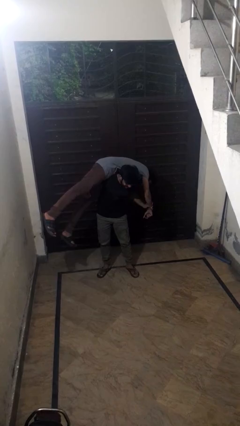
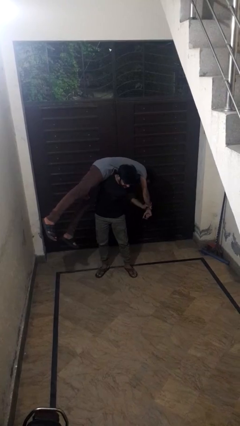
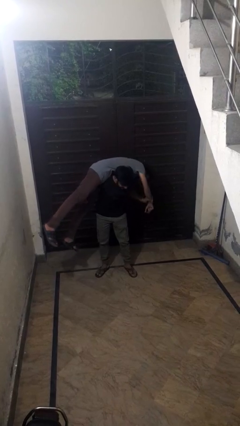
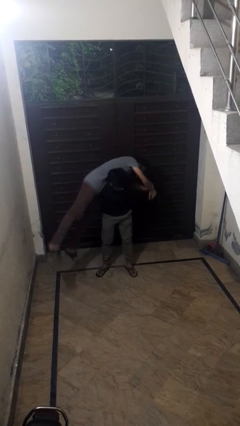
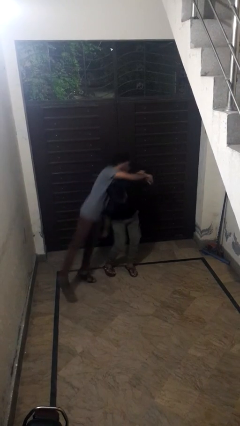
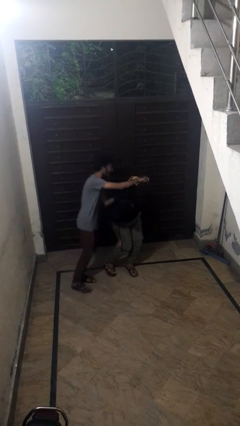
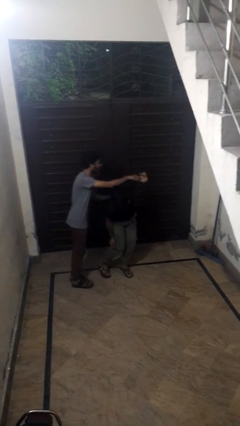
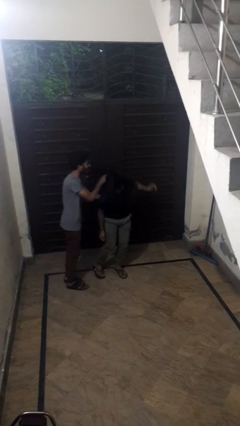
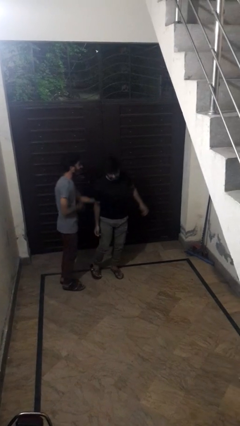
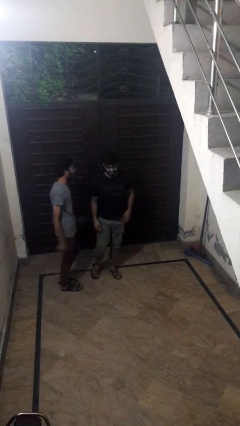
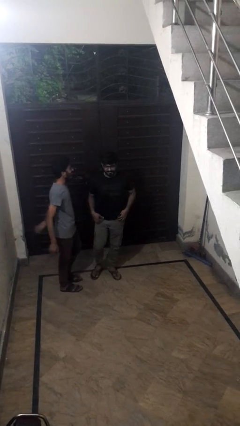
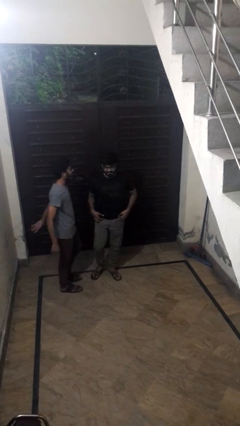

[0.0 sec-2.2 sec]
person puts down person

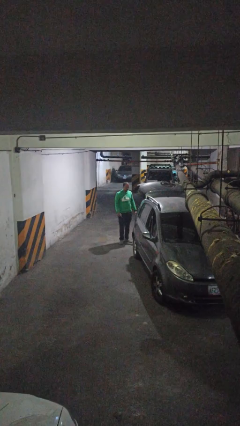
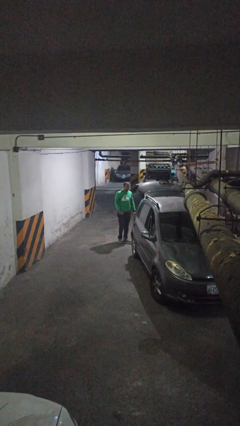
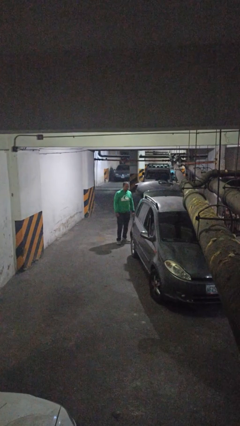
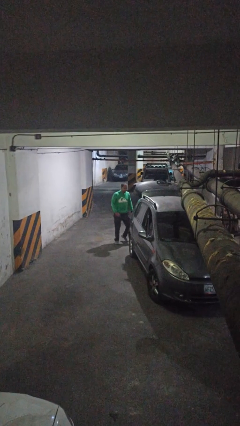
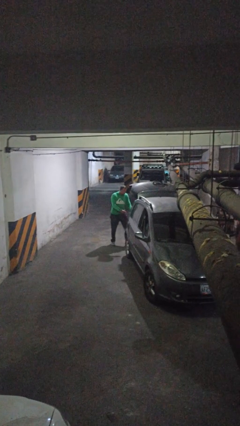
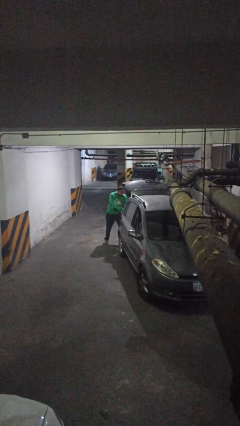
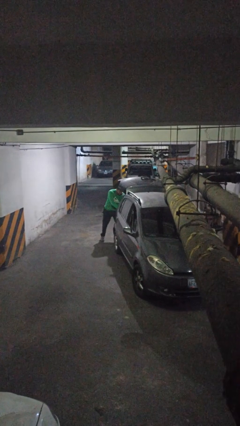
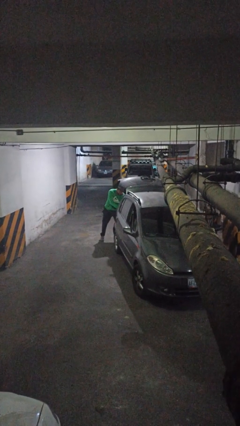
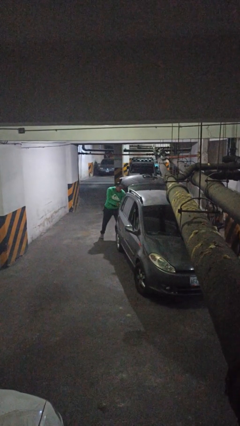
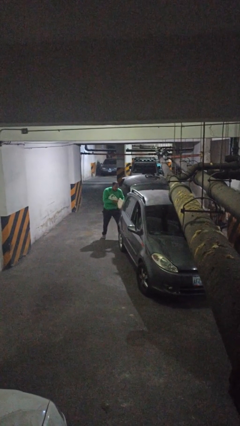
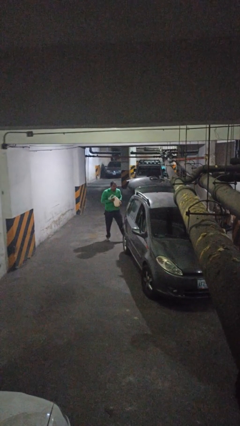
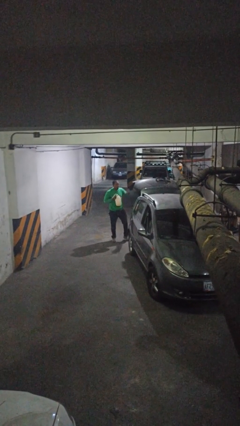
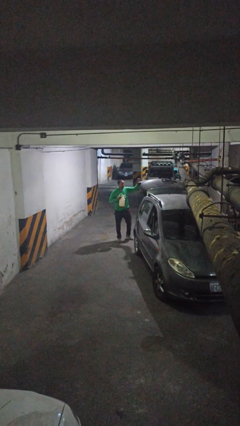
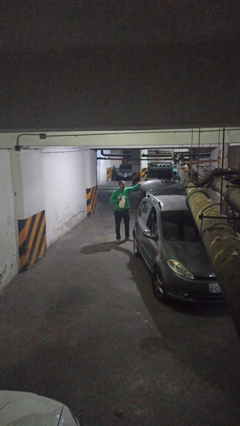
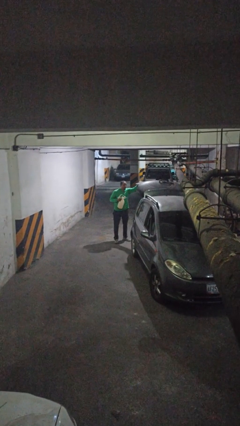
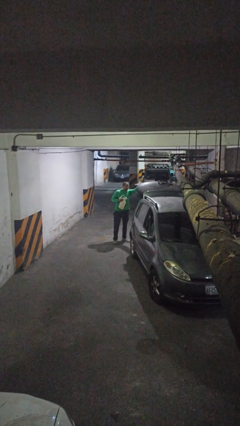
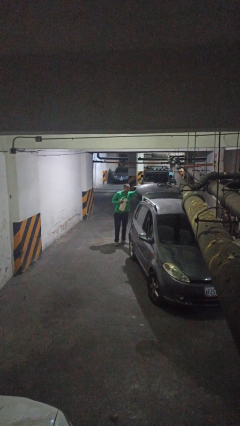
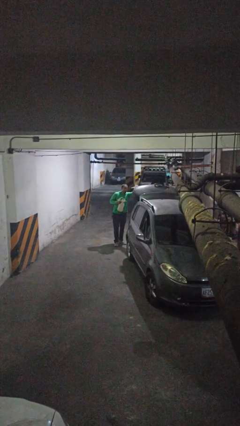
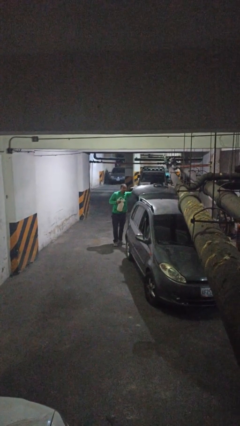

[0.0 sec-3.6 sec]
person unloads car

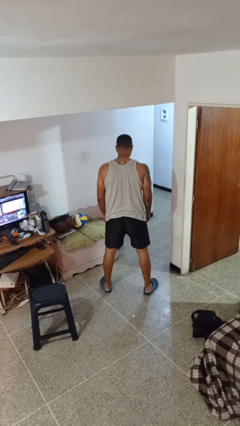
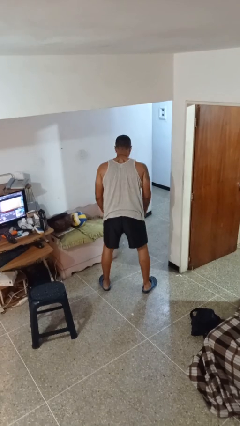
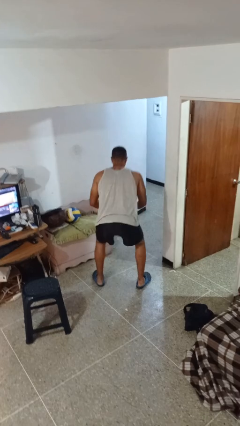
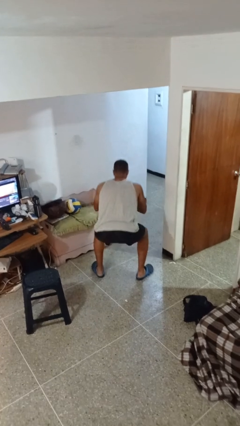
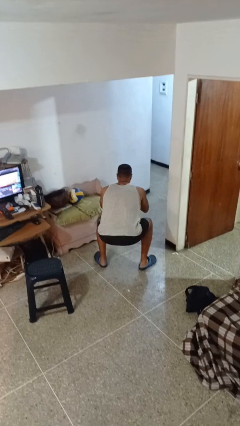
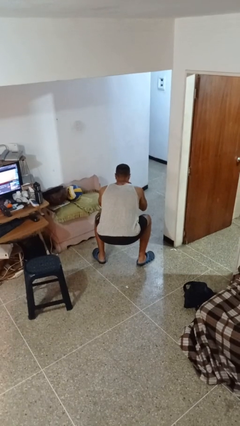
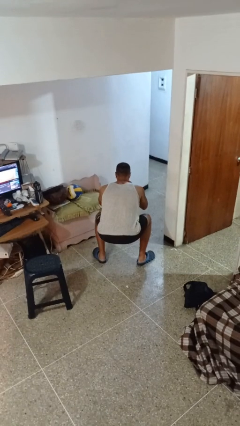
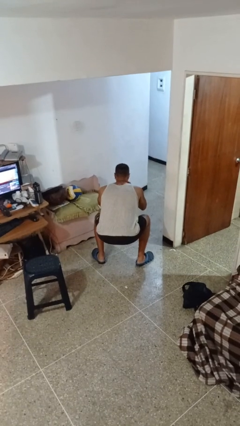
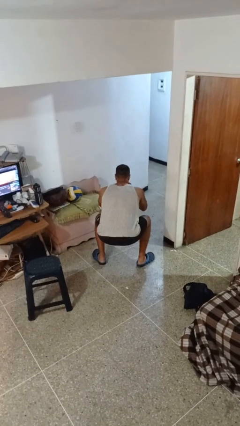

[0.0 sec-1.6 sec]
person squats

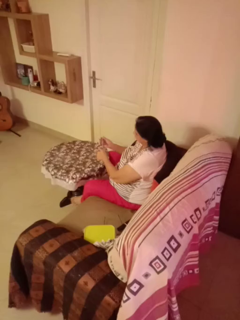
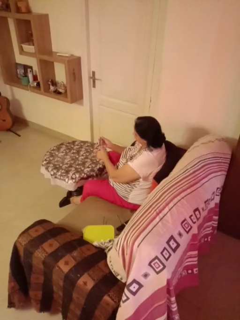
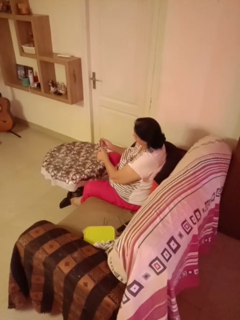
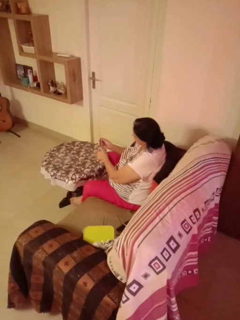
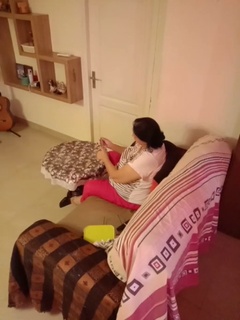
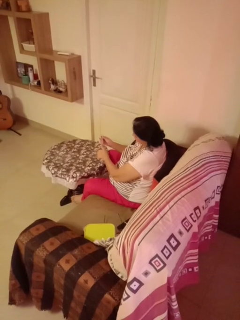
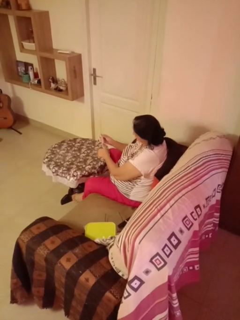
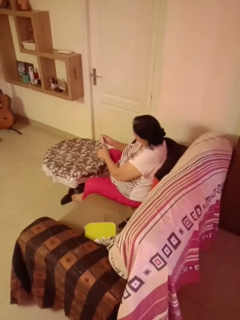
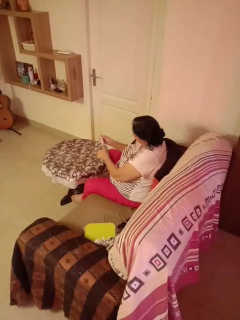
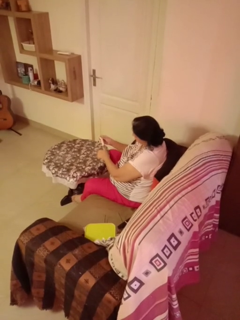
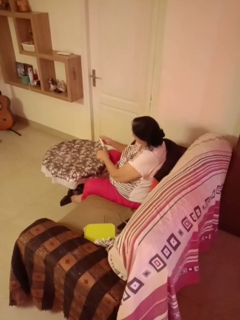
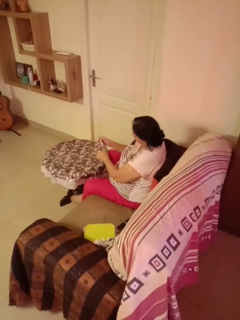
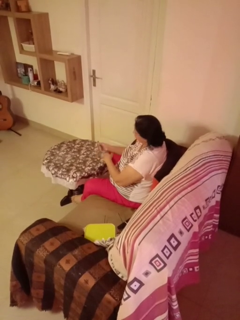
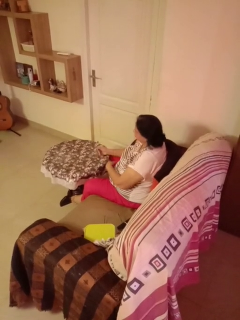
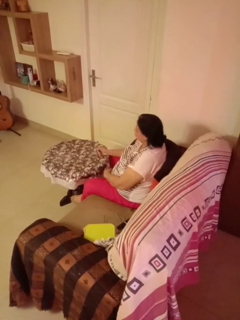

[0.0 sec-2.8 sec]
person clips fingernails

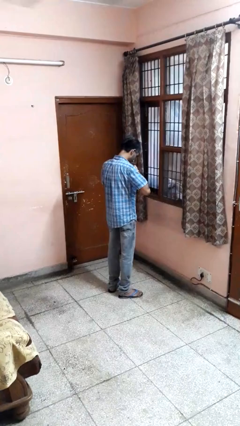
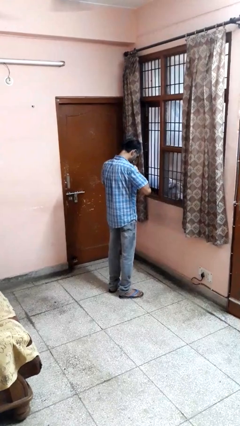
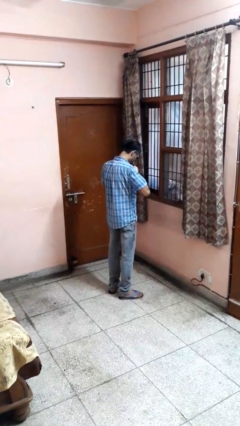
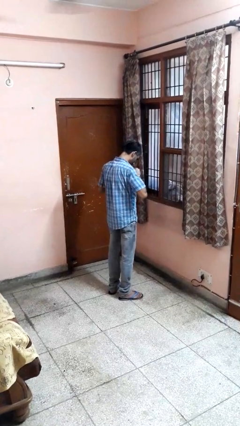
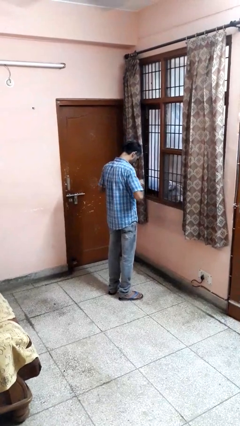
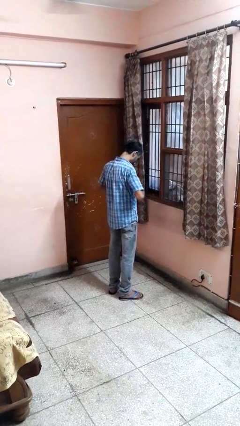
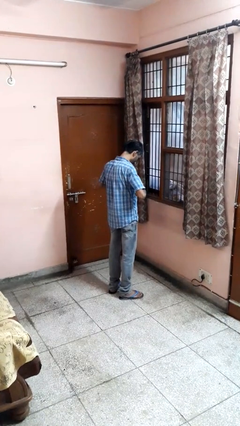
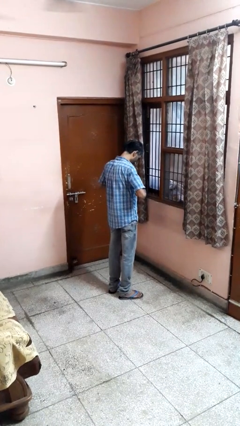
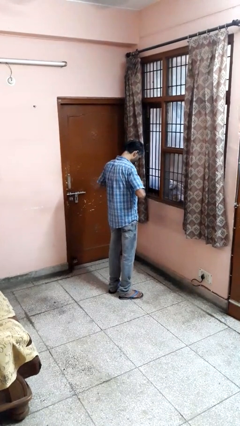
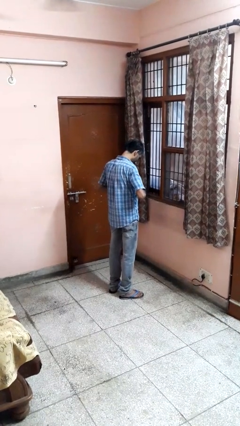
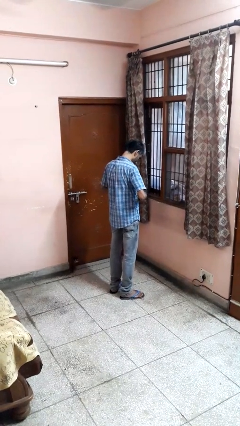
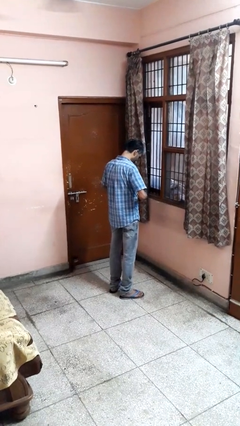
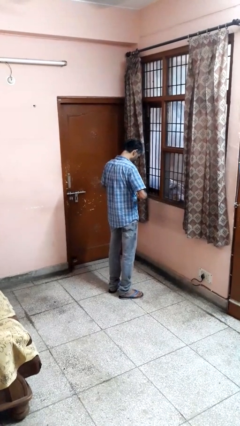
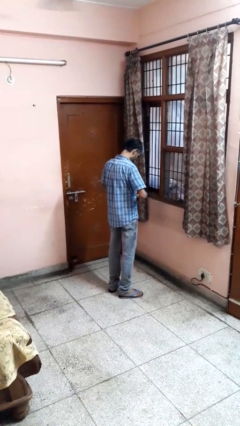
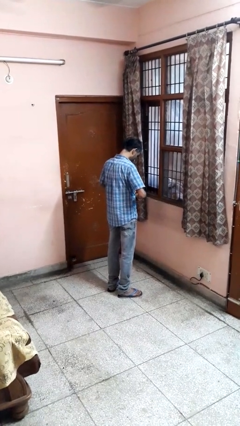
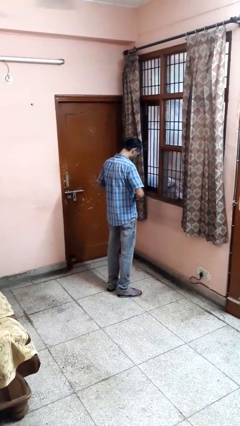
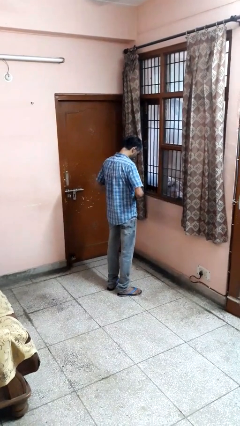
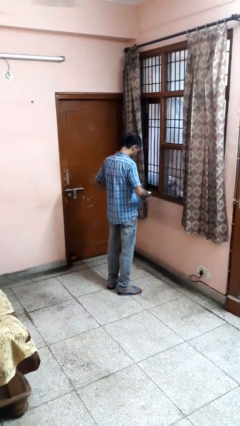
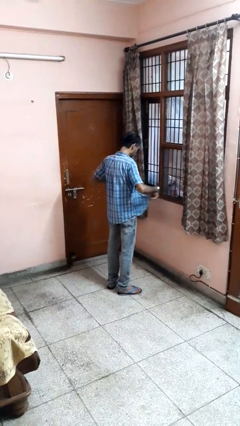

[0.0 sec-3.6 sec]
person unbuttons shirt

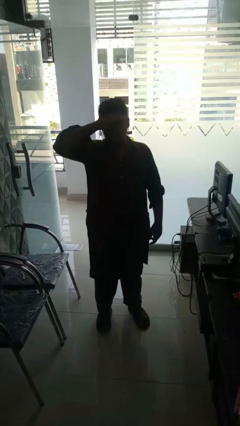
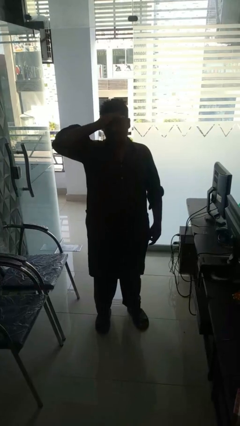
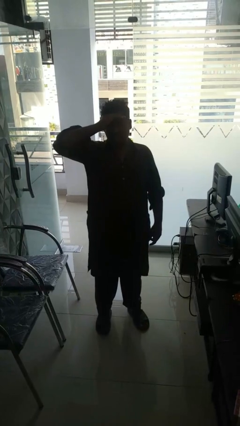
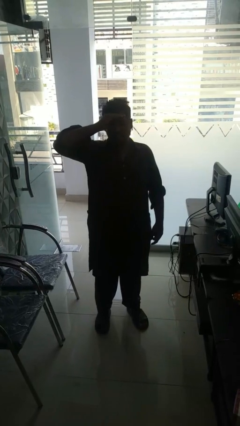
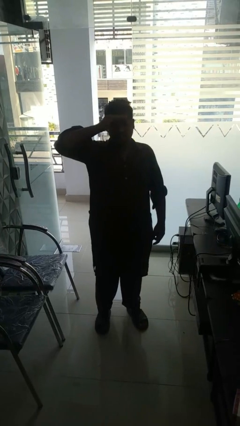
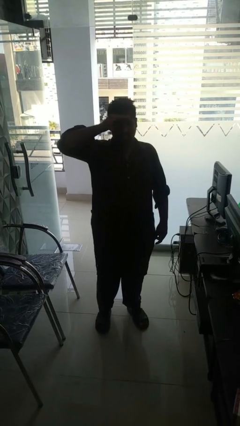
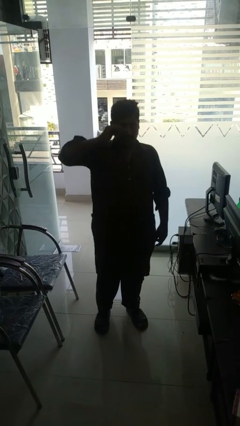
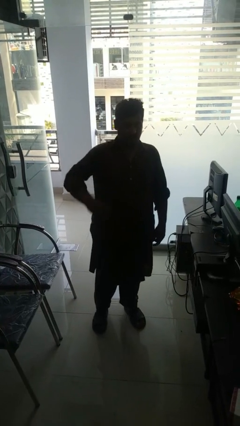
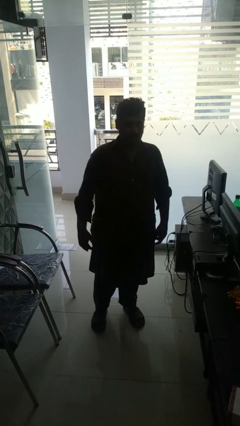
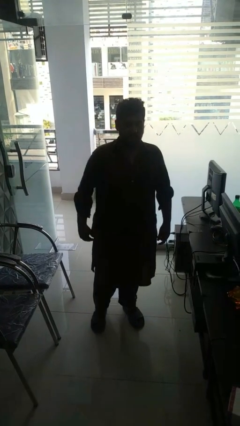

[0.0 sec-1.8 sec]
person shades eyes

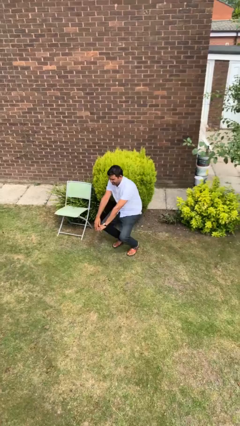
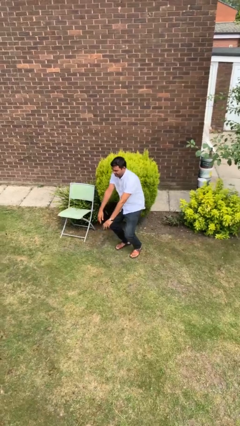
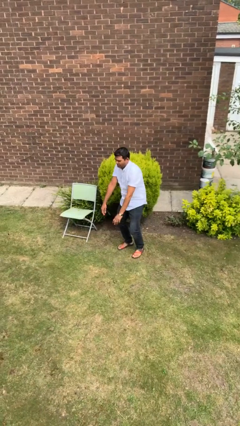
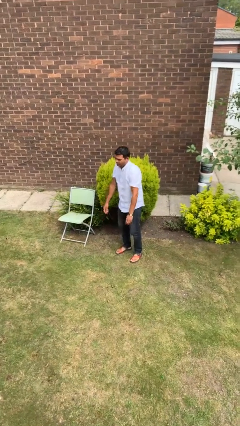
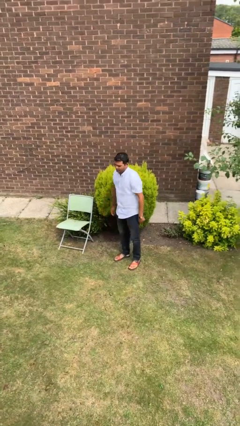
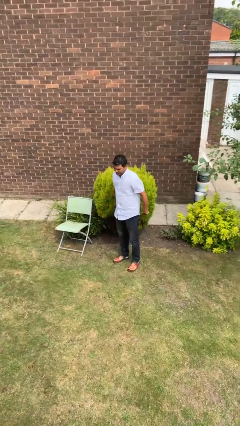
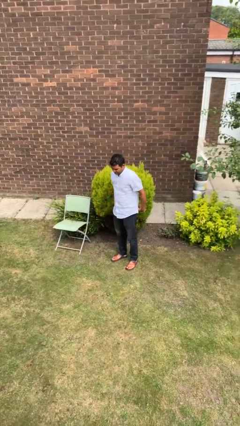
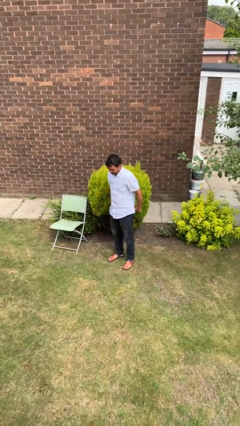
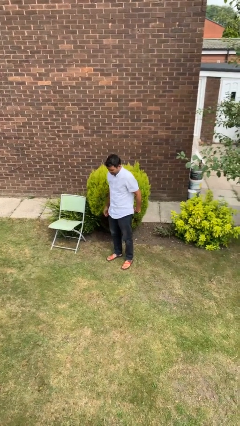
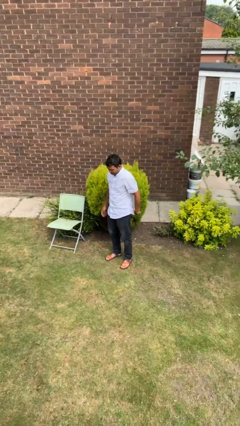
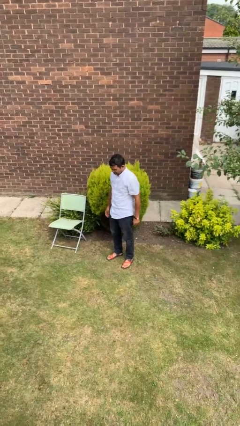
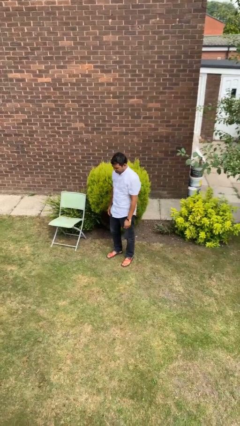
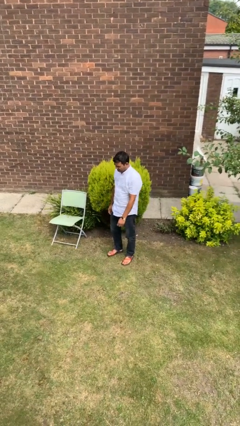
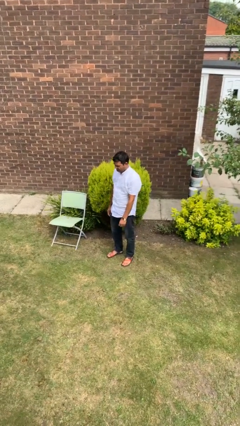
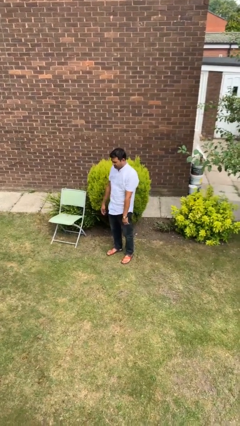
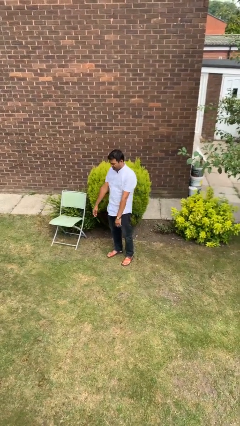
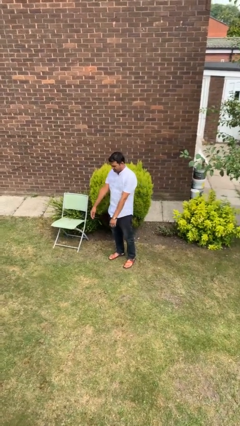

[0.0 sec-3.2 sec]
person stands up
